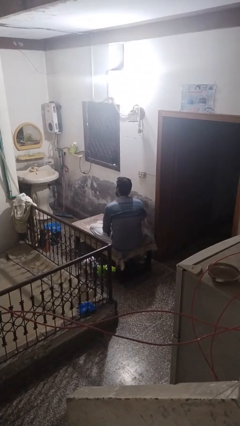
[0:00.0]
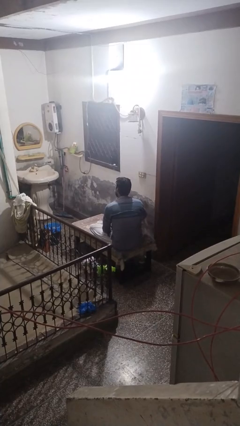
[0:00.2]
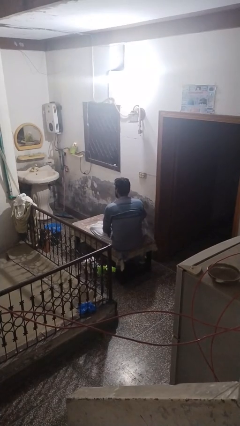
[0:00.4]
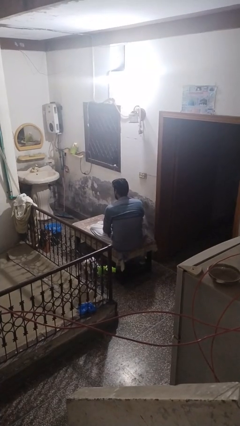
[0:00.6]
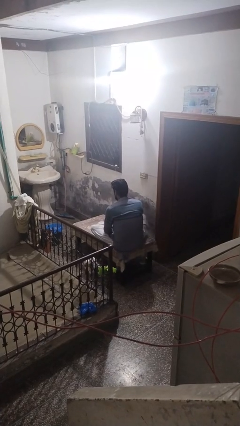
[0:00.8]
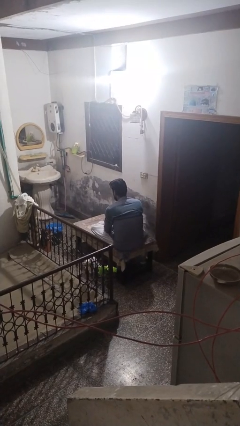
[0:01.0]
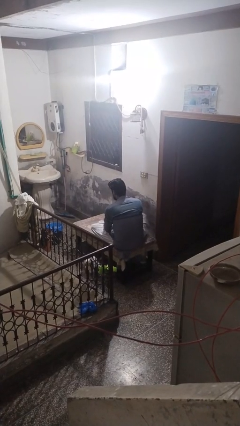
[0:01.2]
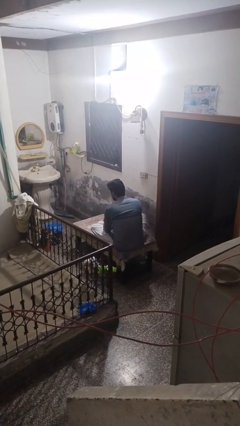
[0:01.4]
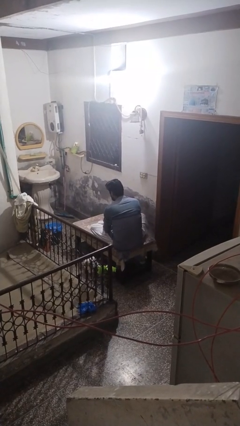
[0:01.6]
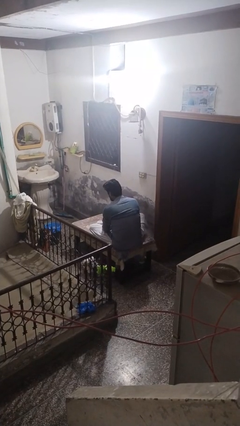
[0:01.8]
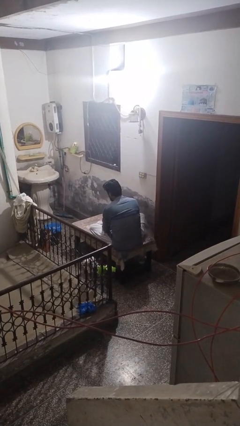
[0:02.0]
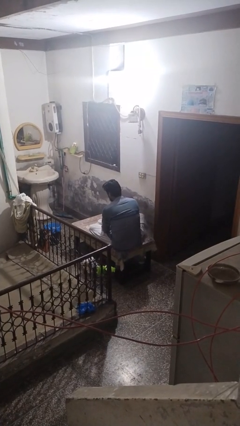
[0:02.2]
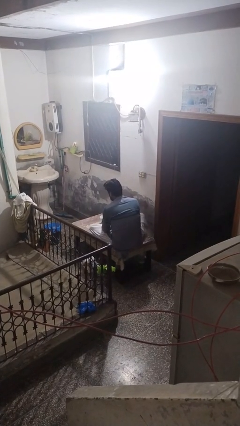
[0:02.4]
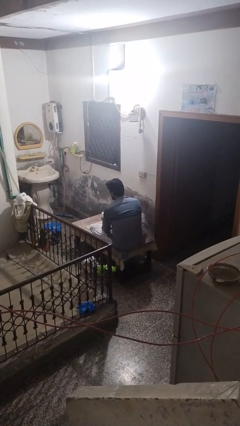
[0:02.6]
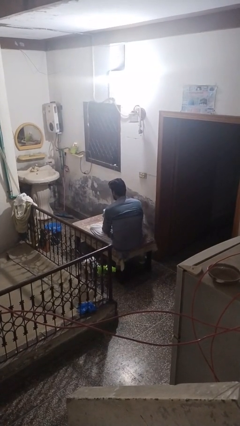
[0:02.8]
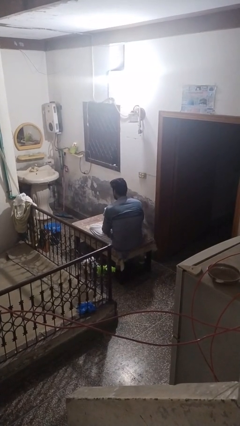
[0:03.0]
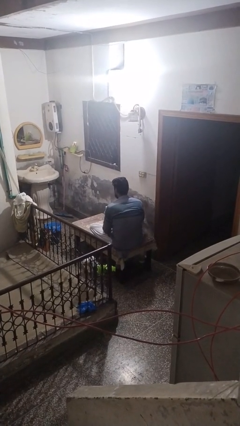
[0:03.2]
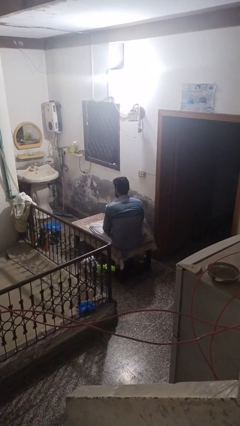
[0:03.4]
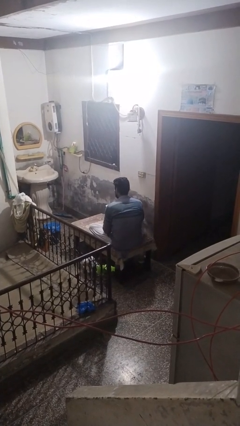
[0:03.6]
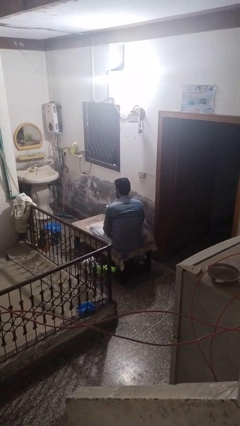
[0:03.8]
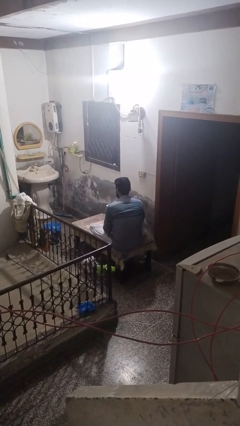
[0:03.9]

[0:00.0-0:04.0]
person picks up object from table

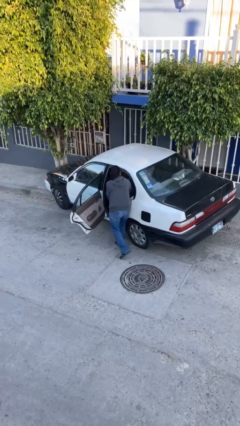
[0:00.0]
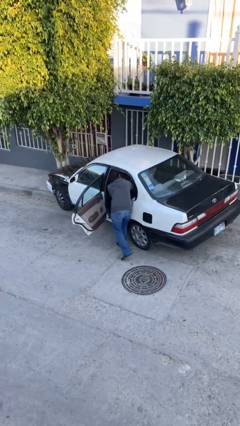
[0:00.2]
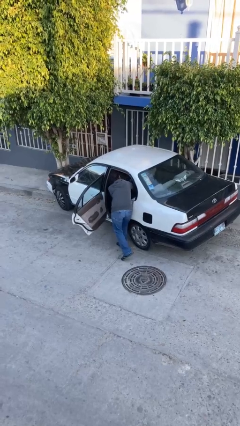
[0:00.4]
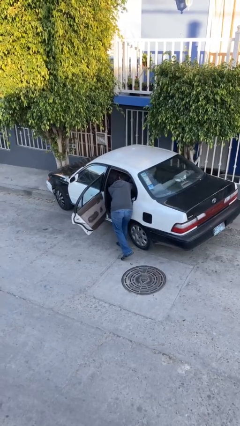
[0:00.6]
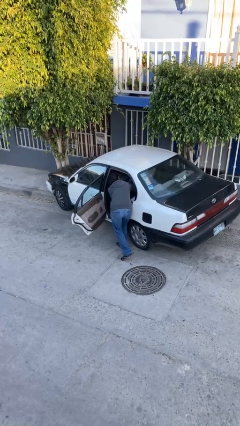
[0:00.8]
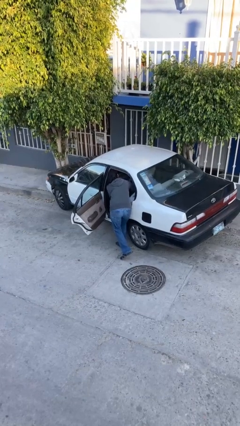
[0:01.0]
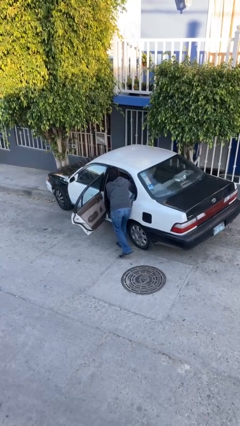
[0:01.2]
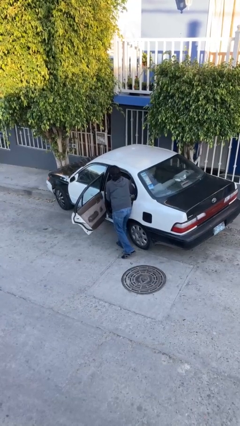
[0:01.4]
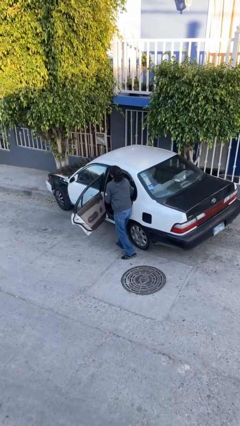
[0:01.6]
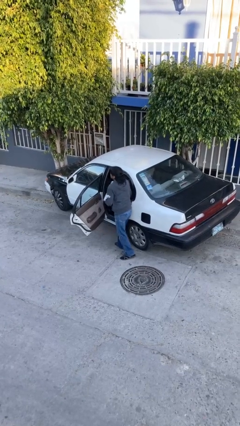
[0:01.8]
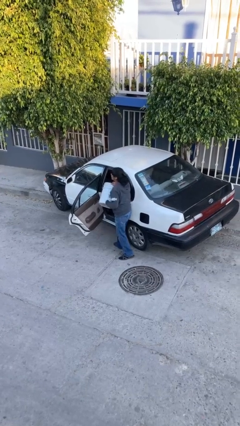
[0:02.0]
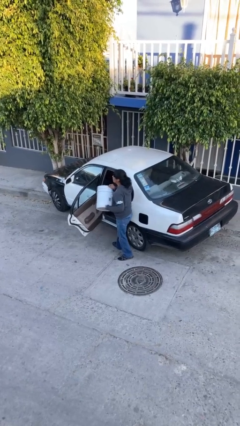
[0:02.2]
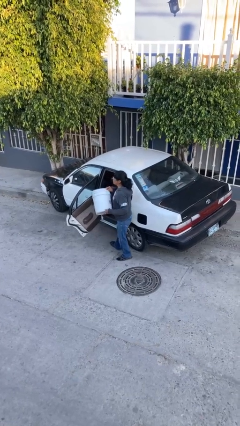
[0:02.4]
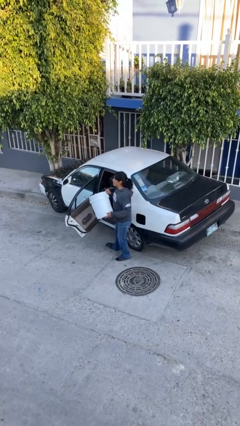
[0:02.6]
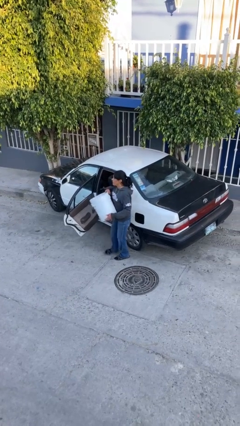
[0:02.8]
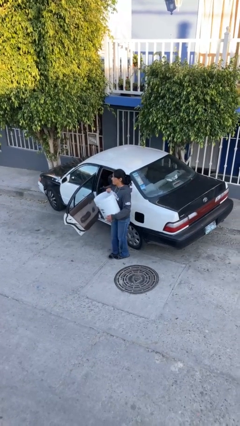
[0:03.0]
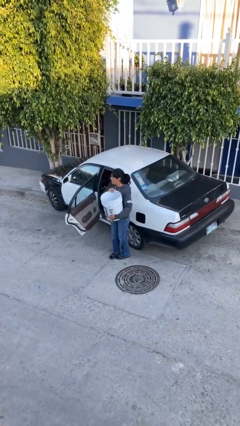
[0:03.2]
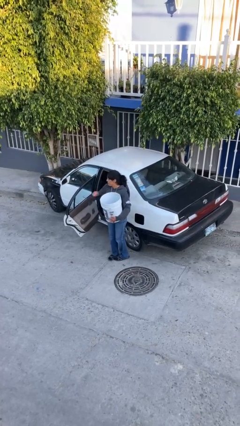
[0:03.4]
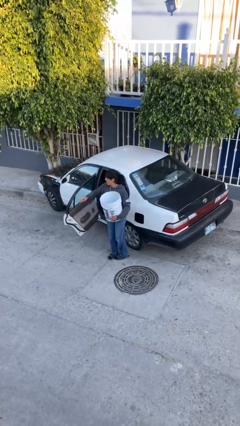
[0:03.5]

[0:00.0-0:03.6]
person unloads car

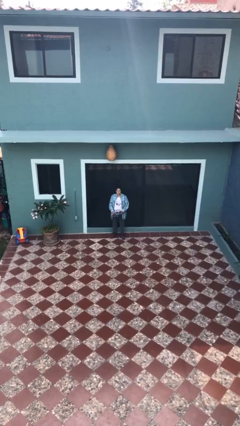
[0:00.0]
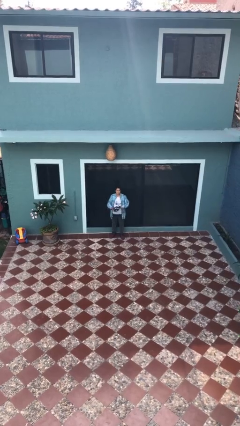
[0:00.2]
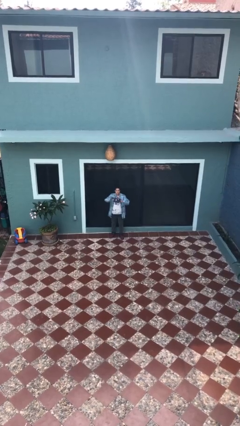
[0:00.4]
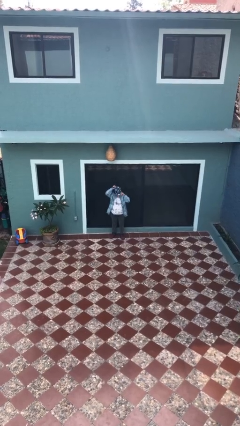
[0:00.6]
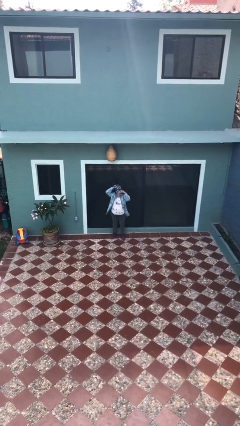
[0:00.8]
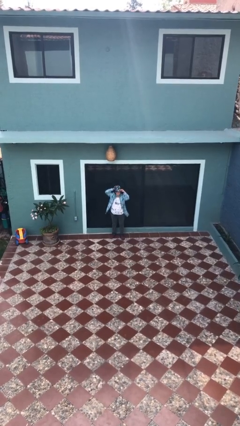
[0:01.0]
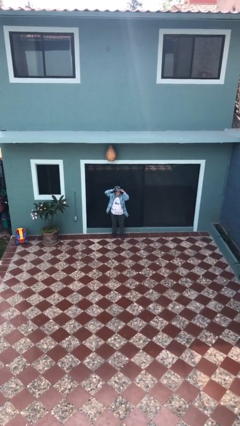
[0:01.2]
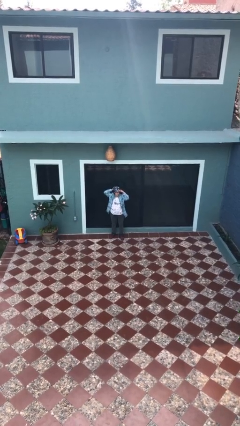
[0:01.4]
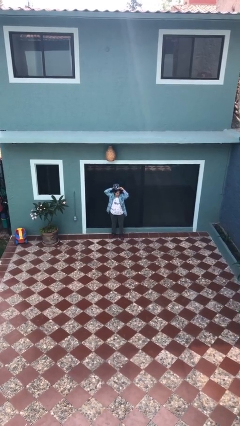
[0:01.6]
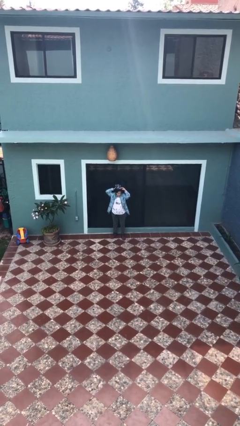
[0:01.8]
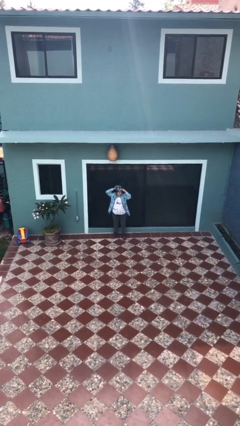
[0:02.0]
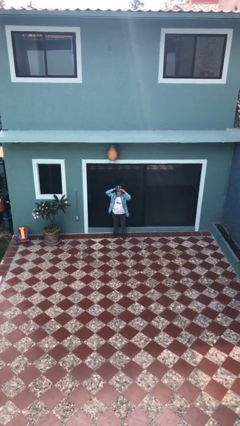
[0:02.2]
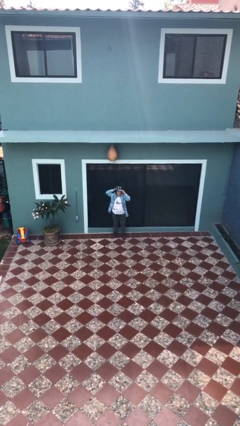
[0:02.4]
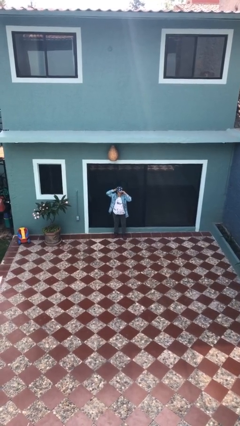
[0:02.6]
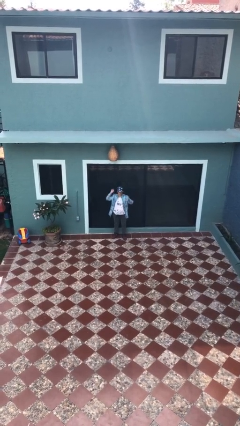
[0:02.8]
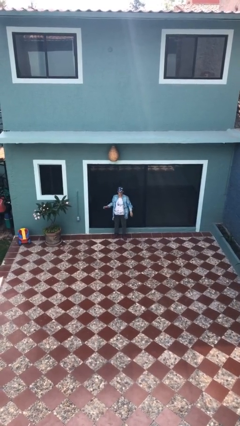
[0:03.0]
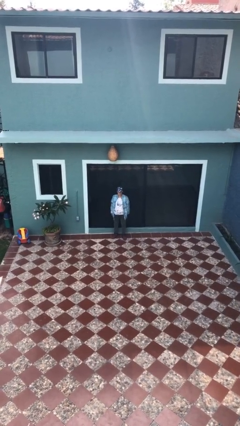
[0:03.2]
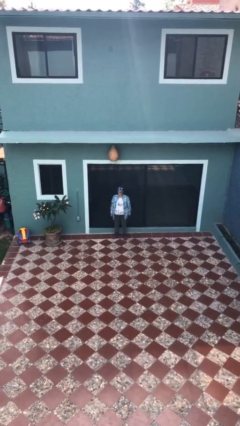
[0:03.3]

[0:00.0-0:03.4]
person puts on hat

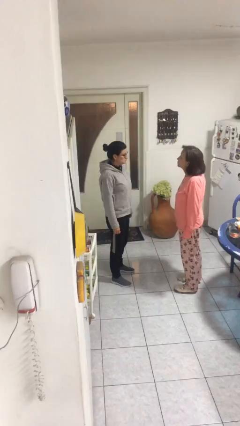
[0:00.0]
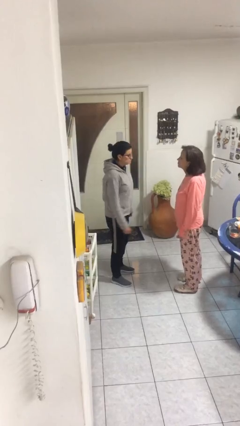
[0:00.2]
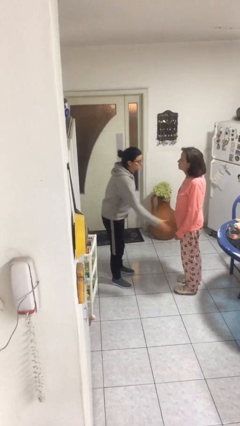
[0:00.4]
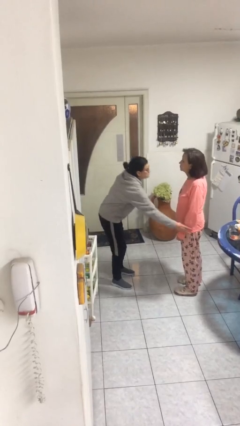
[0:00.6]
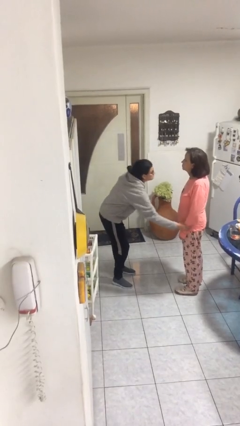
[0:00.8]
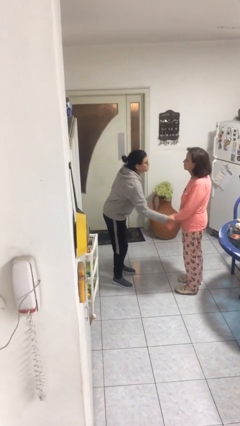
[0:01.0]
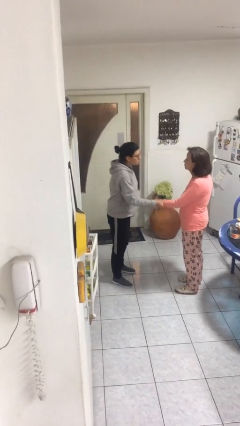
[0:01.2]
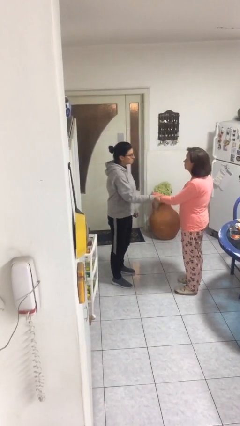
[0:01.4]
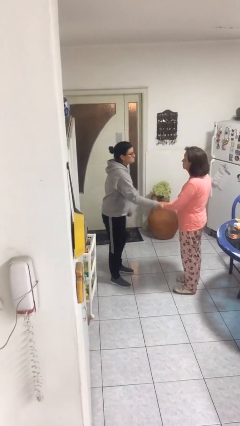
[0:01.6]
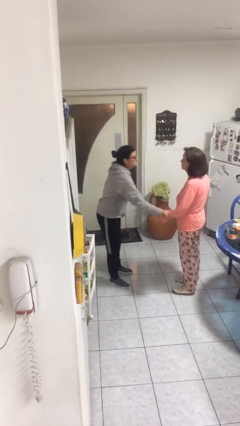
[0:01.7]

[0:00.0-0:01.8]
person grabs person by forearm

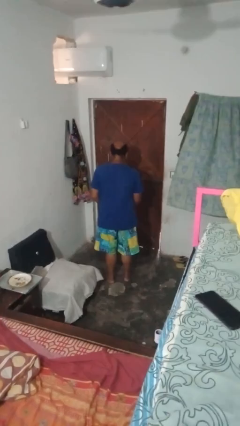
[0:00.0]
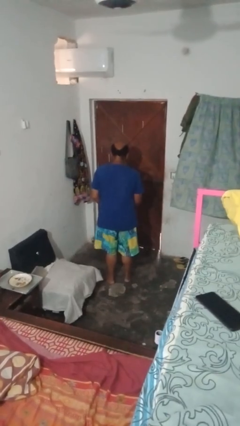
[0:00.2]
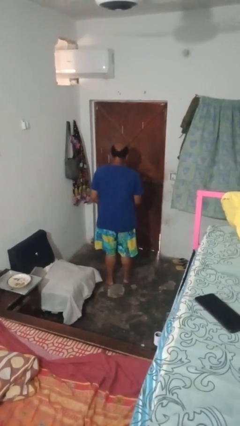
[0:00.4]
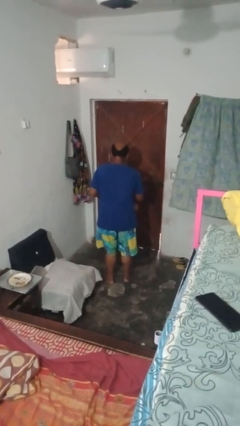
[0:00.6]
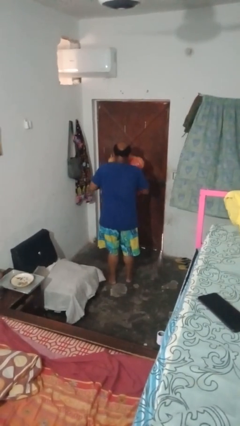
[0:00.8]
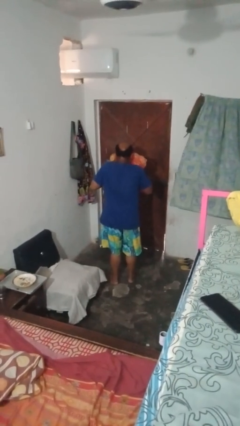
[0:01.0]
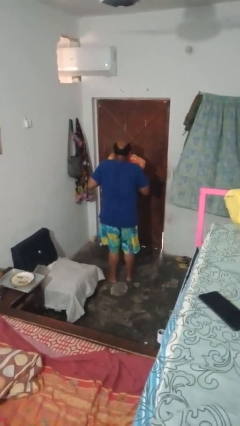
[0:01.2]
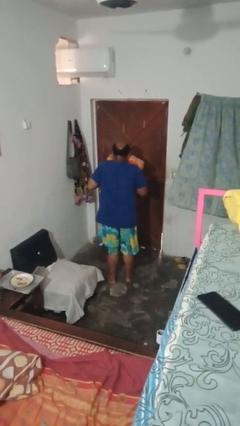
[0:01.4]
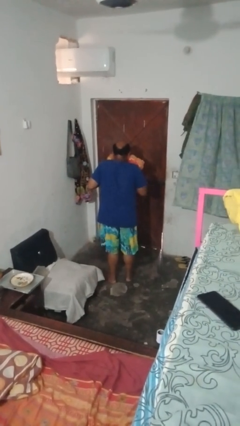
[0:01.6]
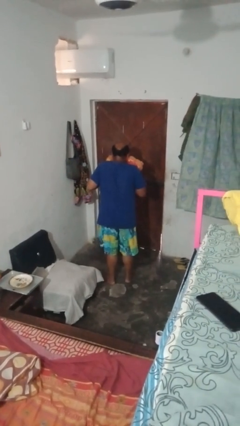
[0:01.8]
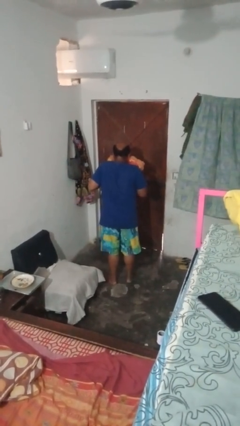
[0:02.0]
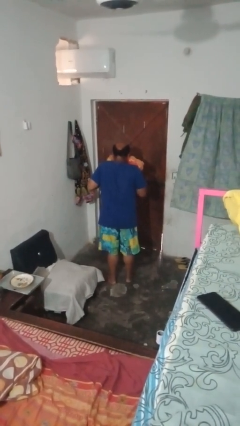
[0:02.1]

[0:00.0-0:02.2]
person hugs stuffed animal

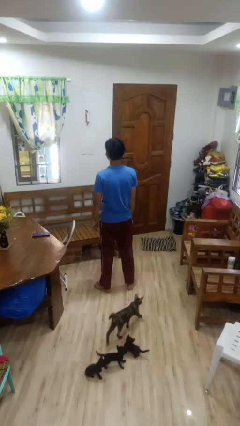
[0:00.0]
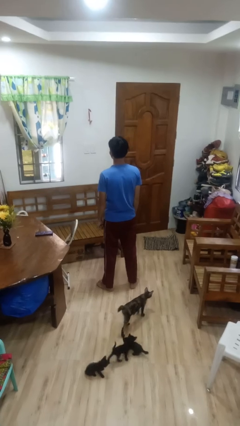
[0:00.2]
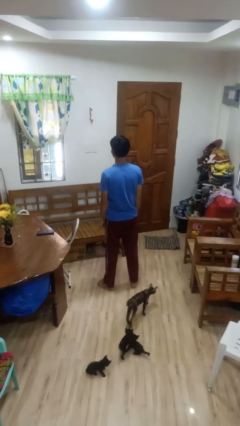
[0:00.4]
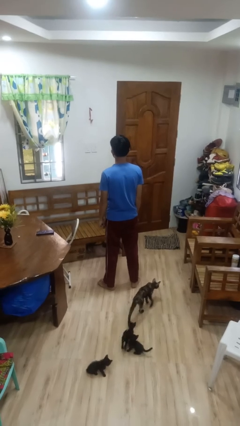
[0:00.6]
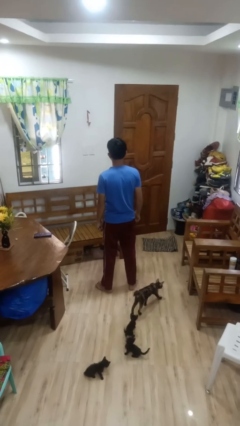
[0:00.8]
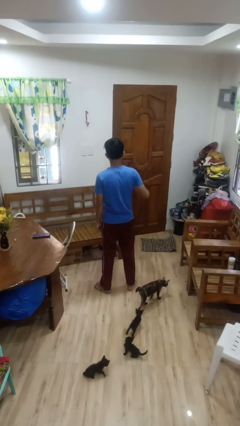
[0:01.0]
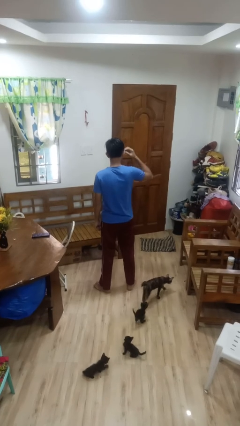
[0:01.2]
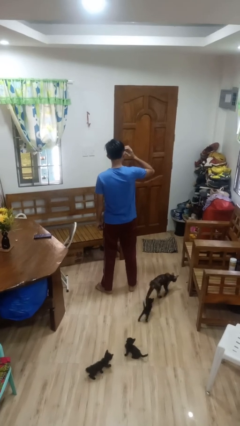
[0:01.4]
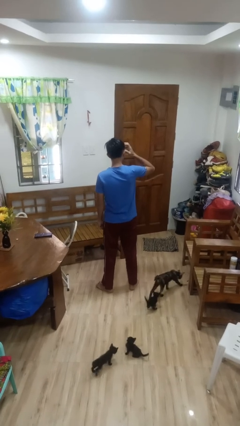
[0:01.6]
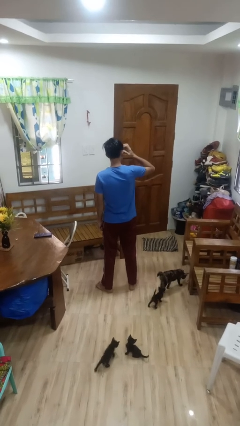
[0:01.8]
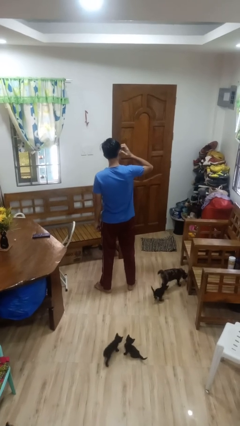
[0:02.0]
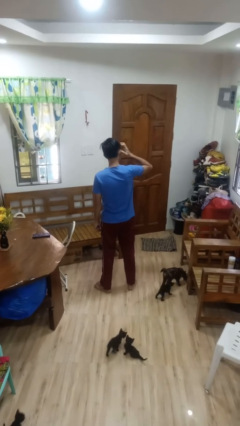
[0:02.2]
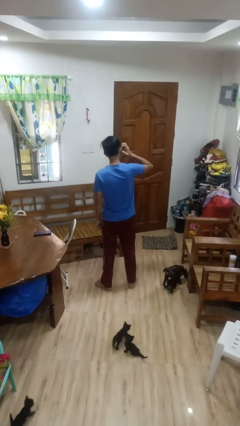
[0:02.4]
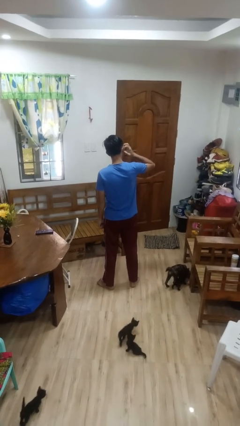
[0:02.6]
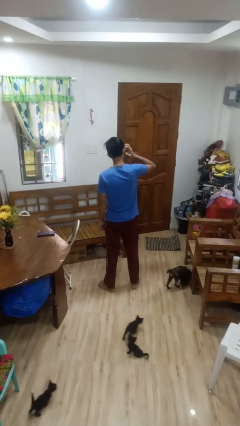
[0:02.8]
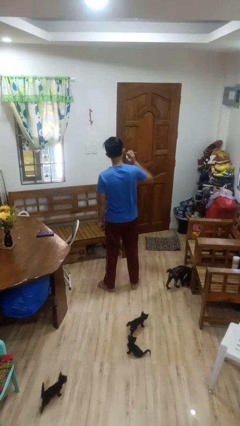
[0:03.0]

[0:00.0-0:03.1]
person scratches face
